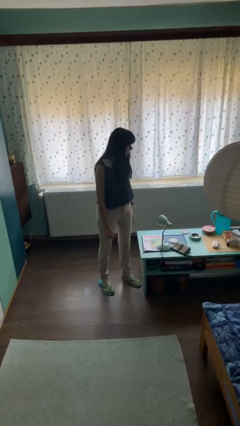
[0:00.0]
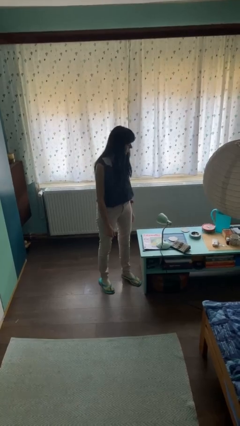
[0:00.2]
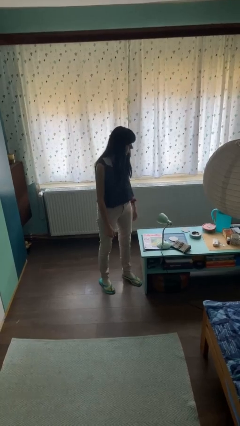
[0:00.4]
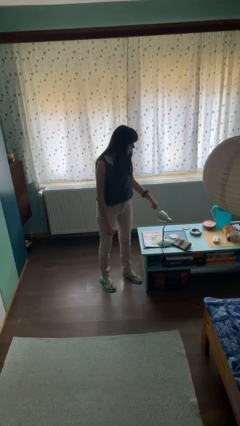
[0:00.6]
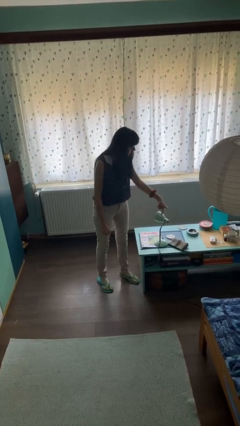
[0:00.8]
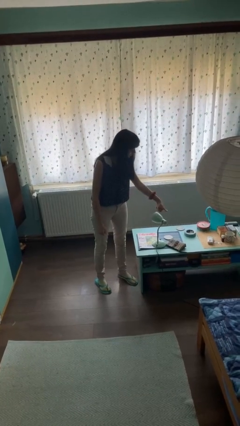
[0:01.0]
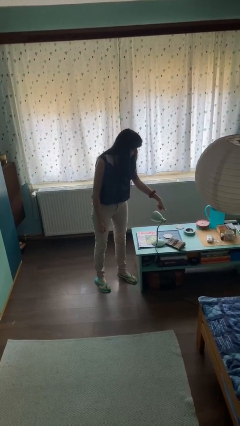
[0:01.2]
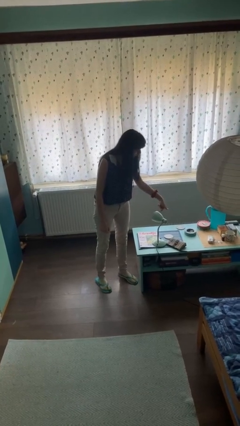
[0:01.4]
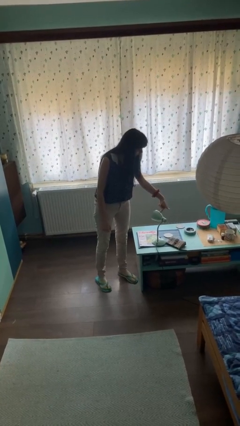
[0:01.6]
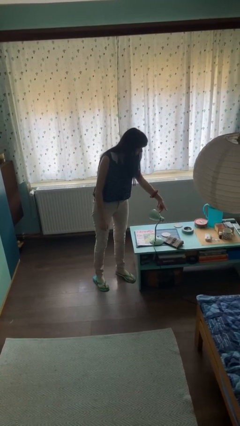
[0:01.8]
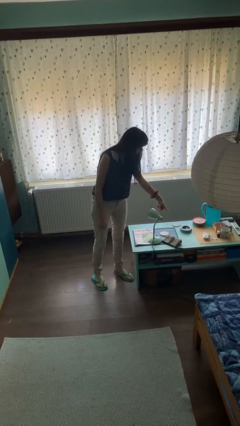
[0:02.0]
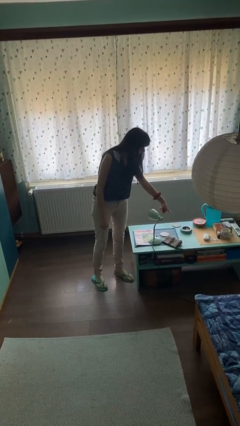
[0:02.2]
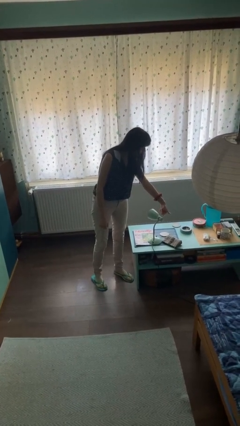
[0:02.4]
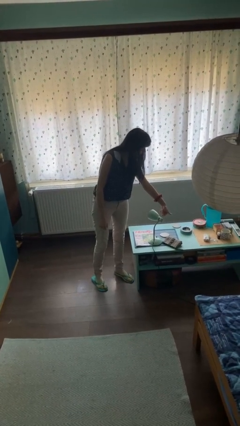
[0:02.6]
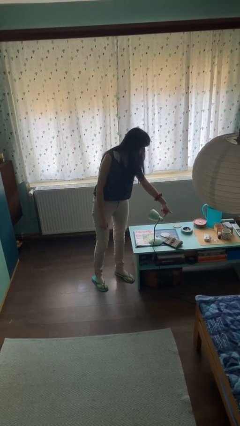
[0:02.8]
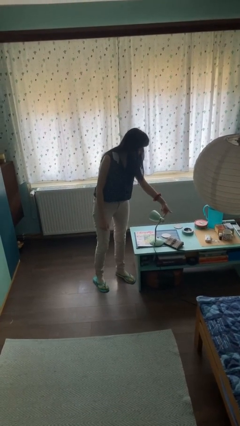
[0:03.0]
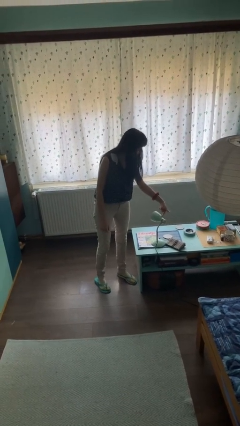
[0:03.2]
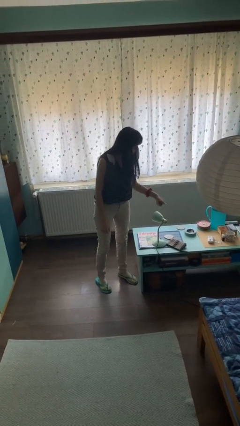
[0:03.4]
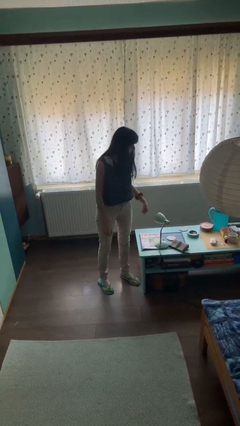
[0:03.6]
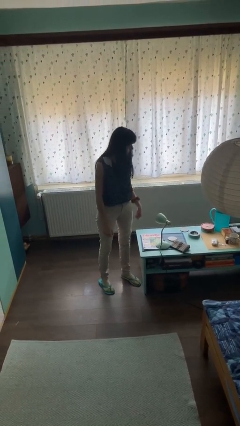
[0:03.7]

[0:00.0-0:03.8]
person taps object with finger

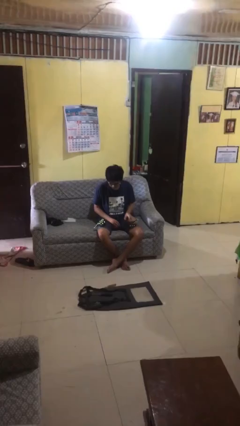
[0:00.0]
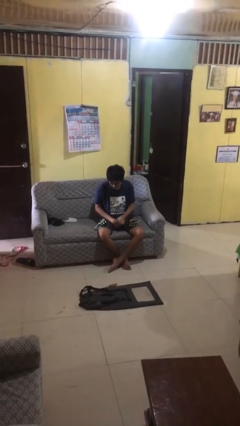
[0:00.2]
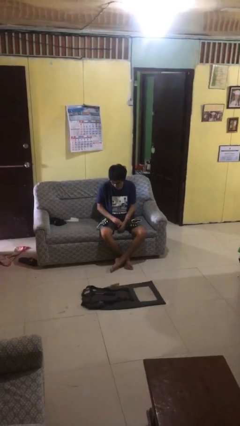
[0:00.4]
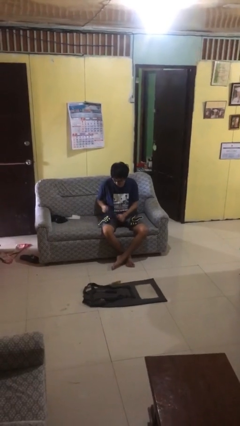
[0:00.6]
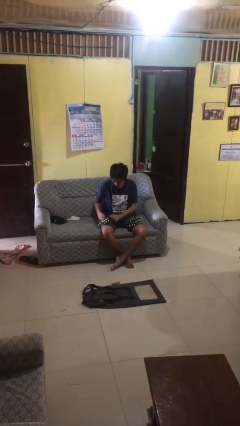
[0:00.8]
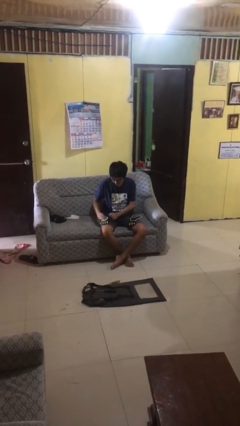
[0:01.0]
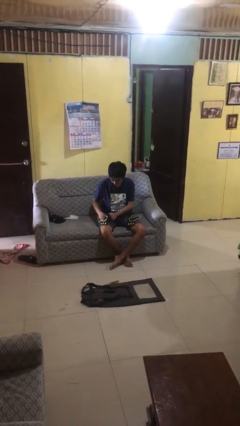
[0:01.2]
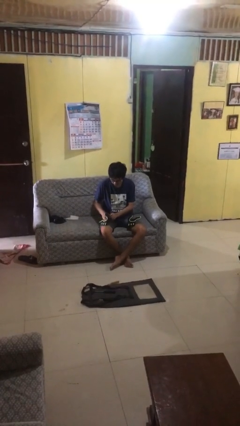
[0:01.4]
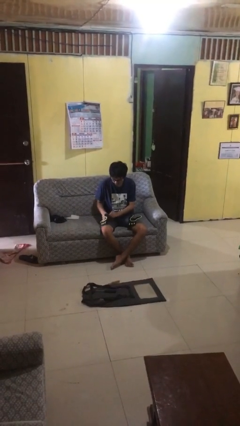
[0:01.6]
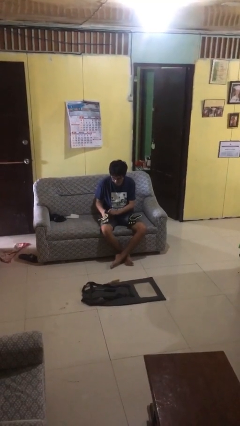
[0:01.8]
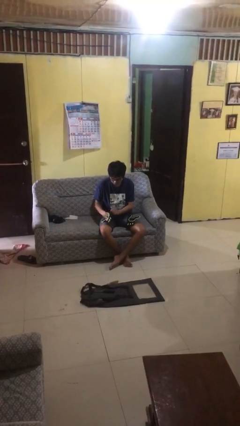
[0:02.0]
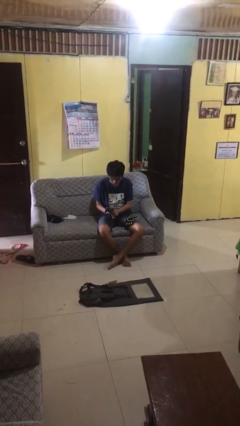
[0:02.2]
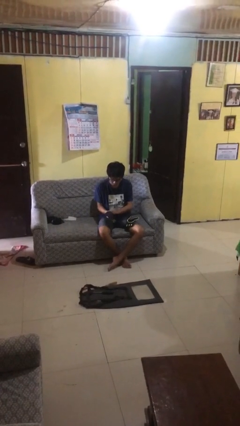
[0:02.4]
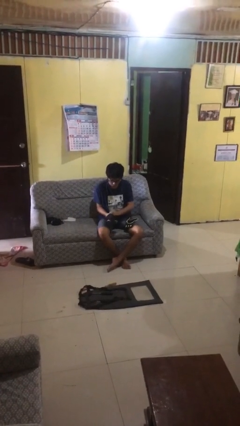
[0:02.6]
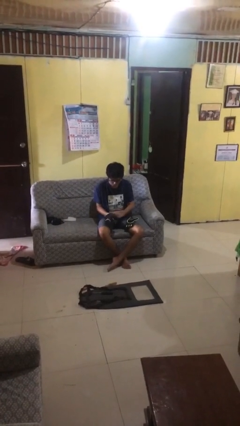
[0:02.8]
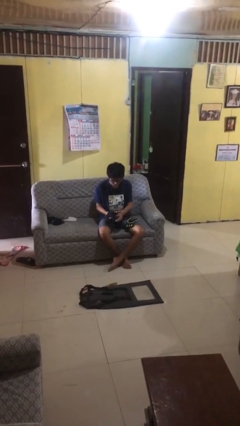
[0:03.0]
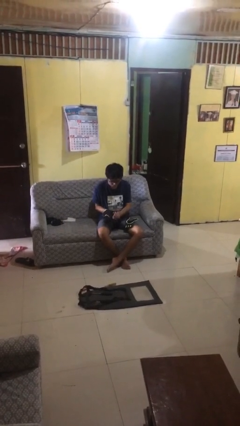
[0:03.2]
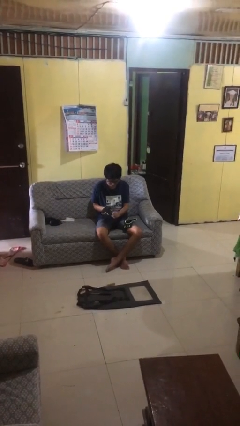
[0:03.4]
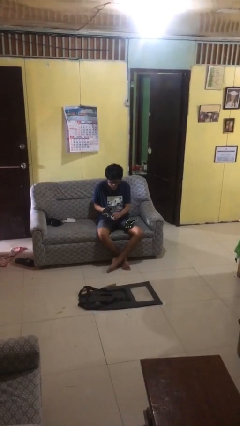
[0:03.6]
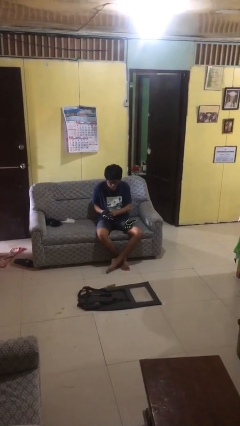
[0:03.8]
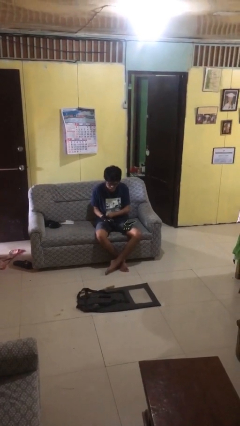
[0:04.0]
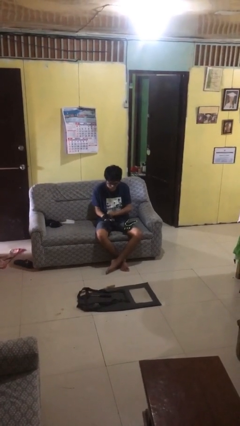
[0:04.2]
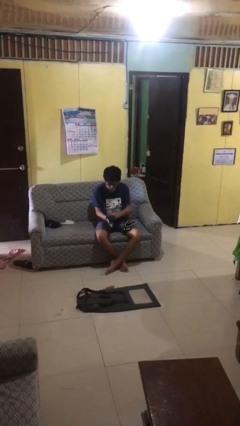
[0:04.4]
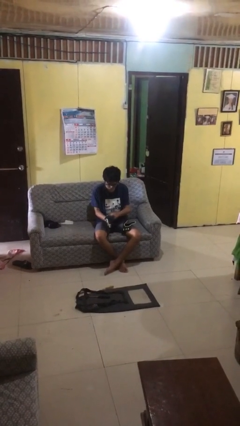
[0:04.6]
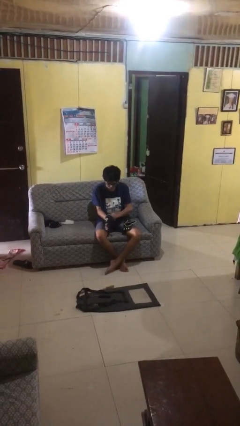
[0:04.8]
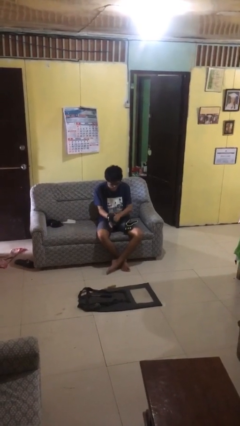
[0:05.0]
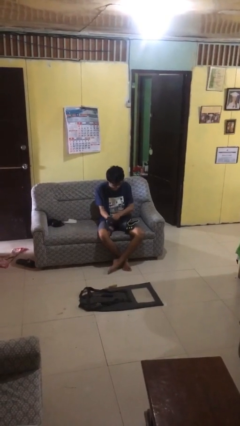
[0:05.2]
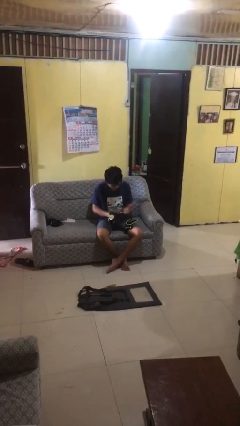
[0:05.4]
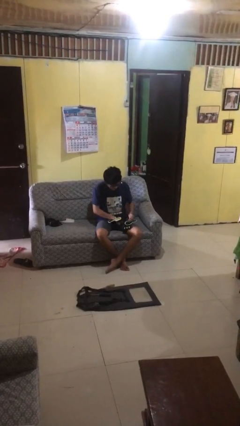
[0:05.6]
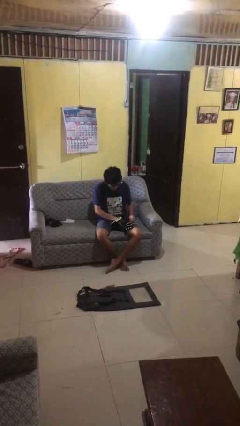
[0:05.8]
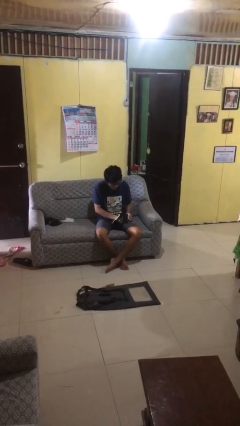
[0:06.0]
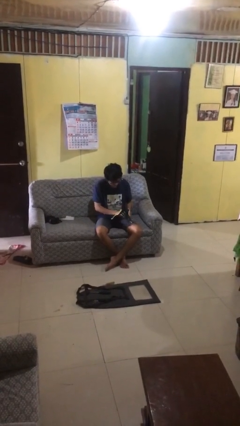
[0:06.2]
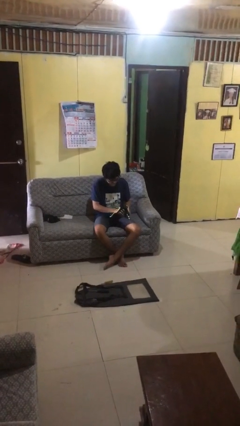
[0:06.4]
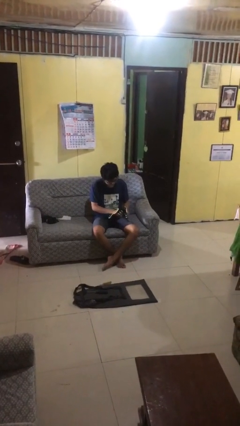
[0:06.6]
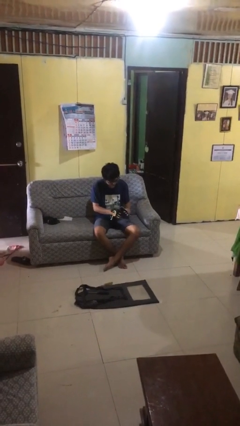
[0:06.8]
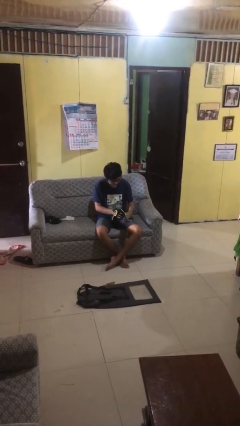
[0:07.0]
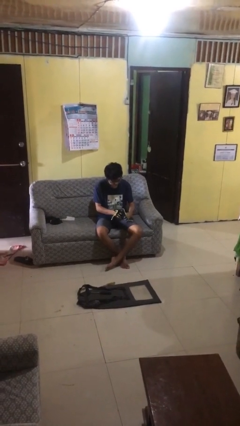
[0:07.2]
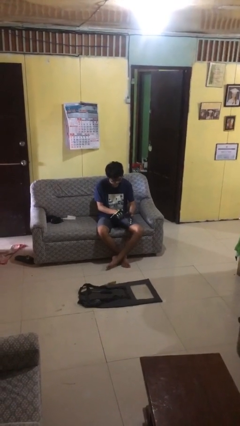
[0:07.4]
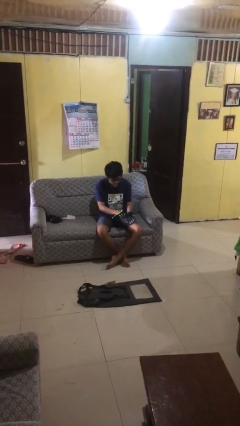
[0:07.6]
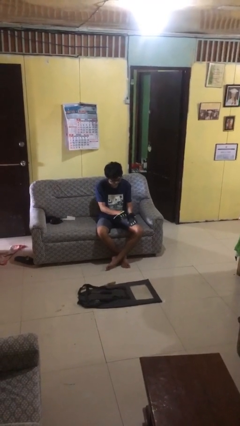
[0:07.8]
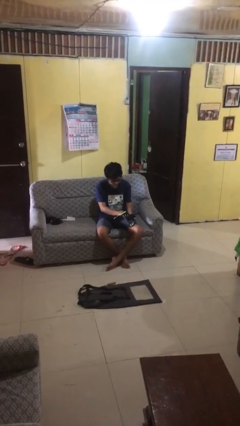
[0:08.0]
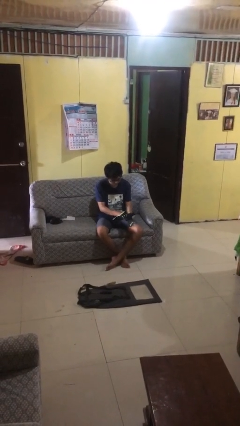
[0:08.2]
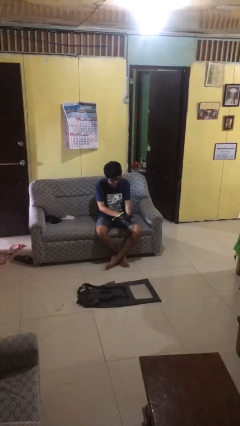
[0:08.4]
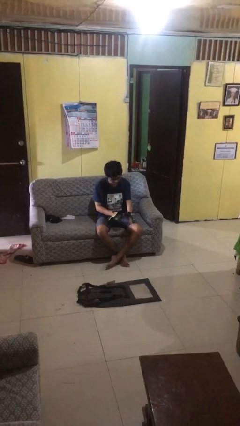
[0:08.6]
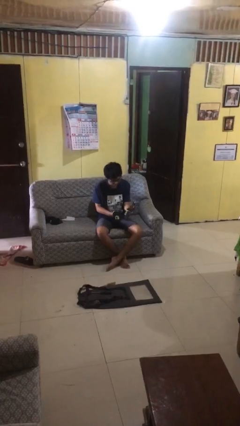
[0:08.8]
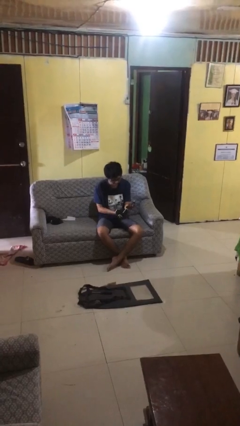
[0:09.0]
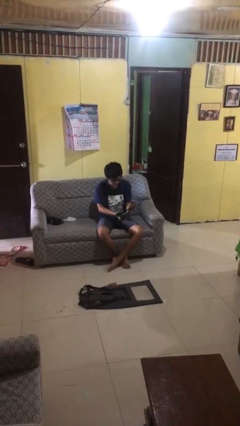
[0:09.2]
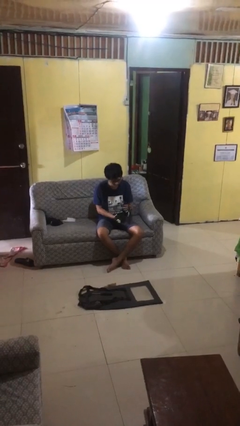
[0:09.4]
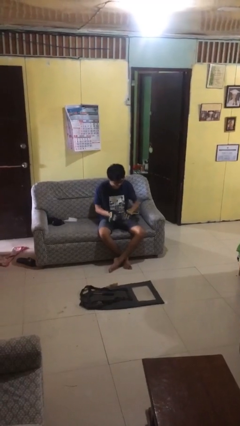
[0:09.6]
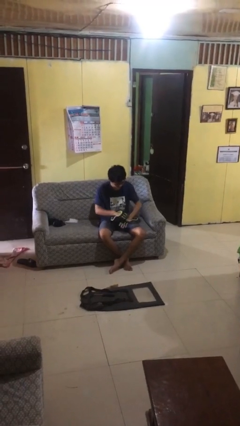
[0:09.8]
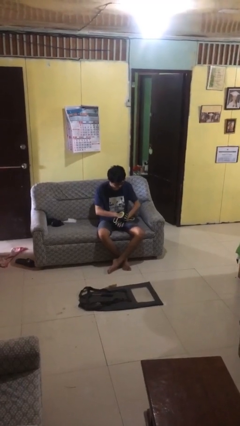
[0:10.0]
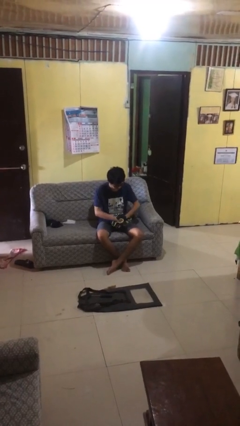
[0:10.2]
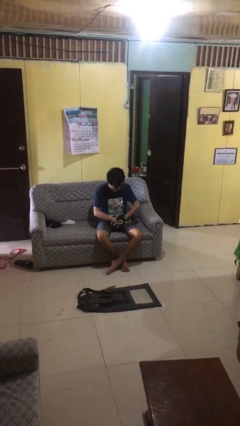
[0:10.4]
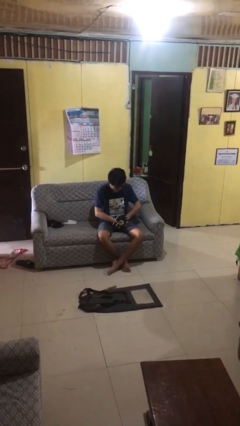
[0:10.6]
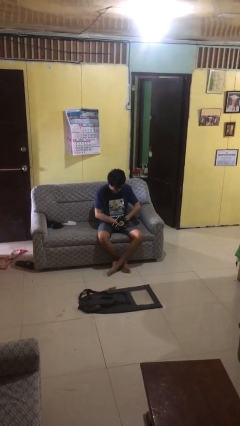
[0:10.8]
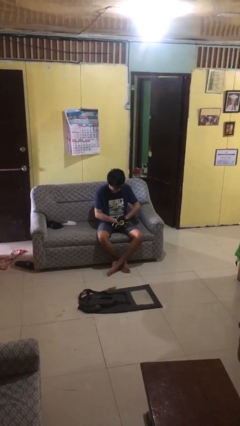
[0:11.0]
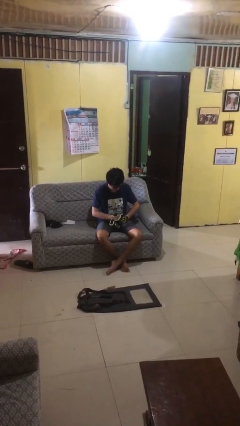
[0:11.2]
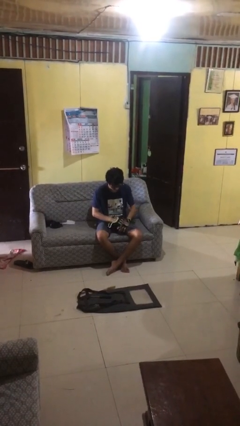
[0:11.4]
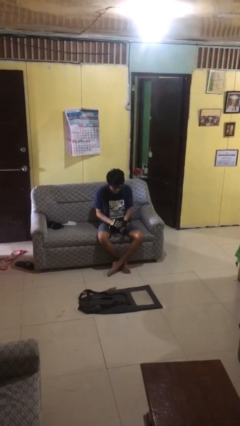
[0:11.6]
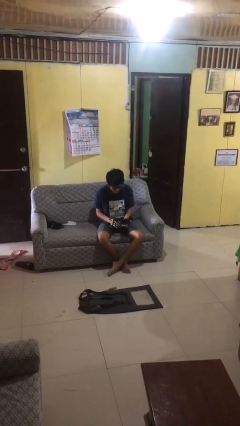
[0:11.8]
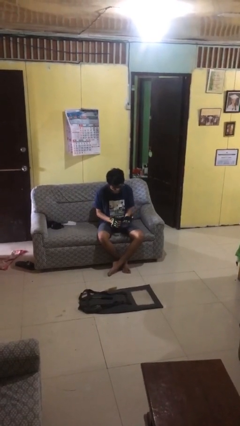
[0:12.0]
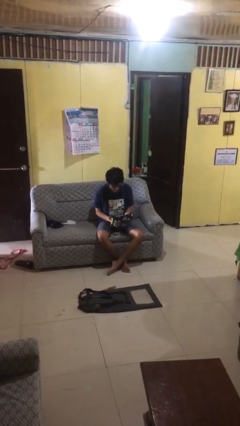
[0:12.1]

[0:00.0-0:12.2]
person puts on gloves

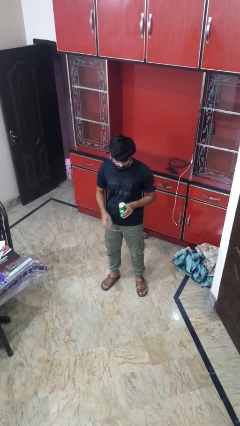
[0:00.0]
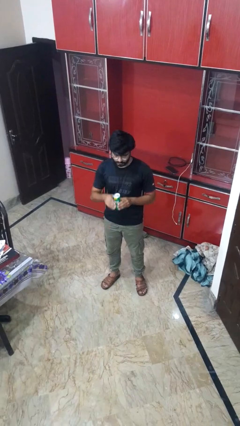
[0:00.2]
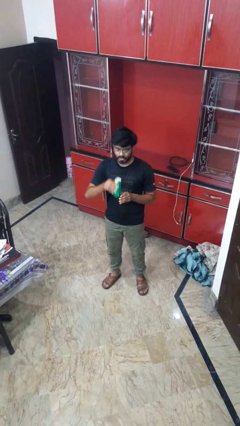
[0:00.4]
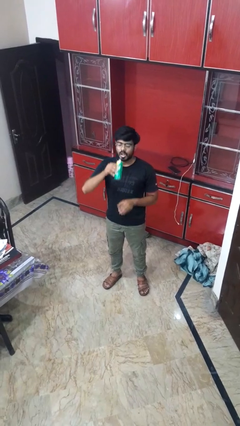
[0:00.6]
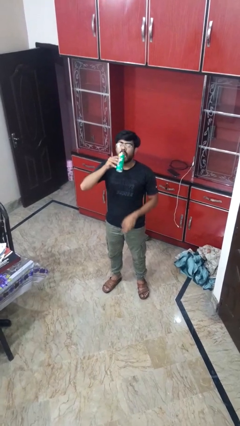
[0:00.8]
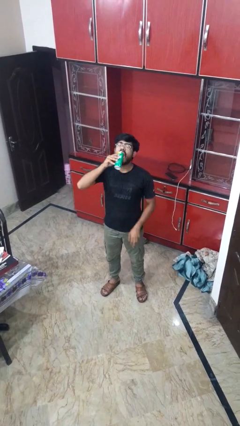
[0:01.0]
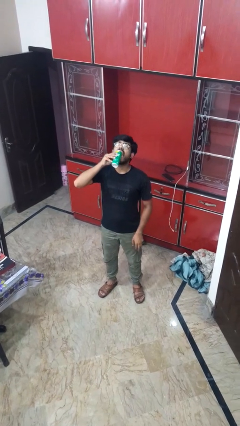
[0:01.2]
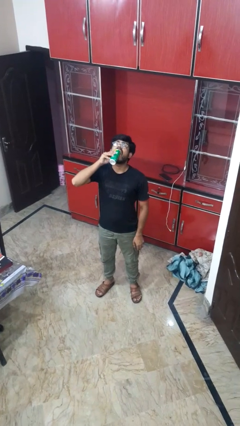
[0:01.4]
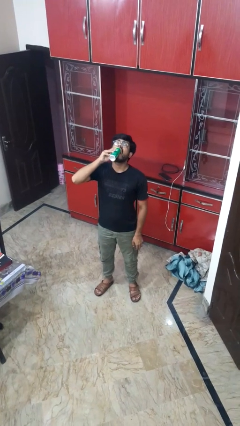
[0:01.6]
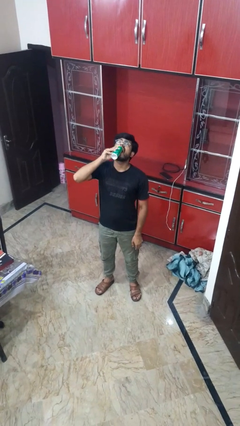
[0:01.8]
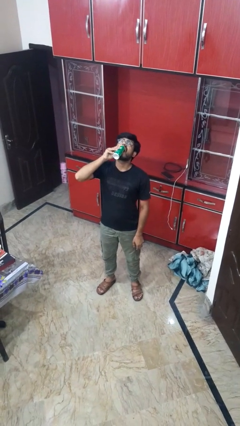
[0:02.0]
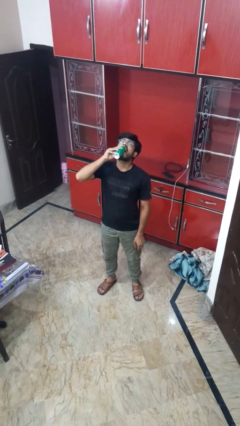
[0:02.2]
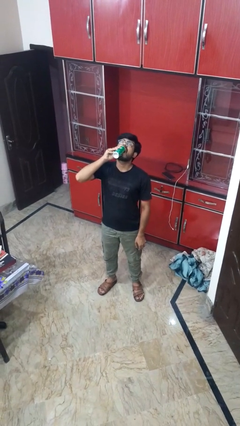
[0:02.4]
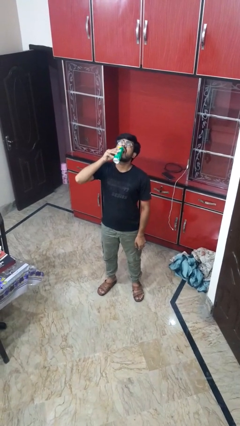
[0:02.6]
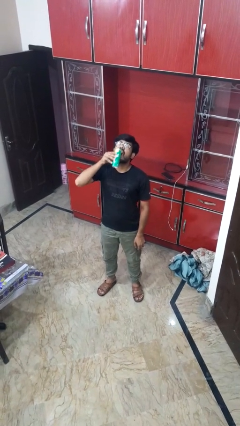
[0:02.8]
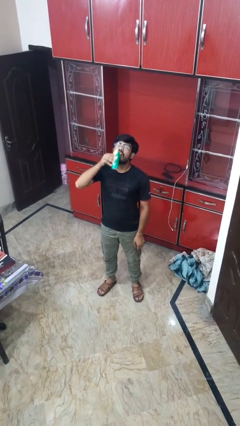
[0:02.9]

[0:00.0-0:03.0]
person drinks from beverage can
